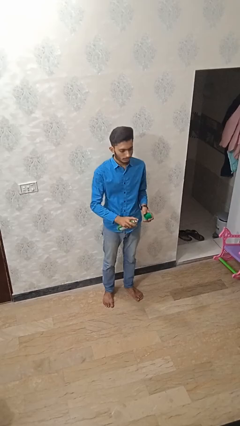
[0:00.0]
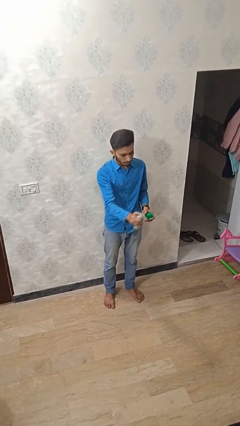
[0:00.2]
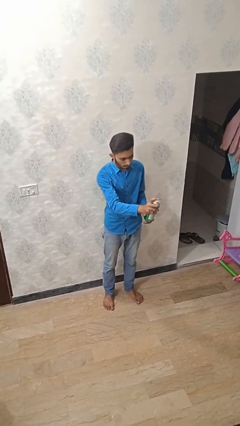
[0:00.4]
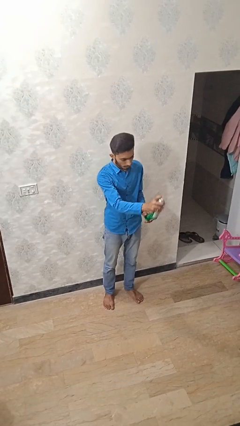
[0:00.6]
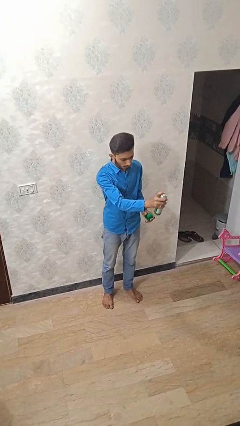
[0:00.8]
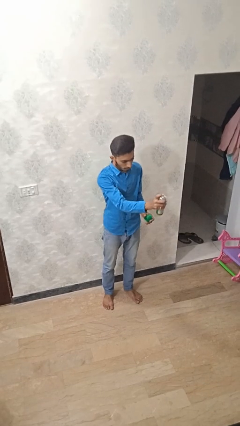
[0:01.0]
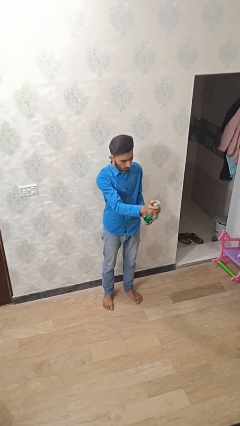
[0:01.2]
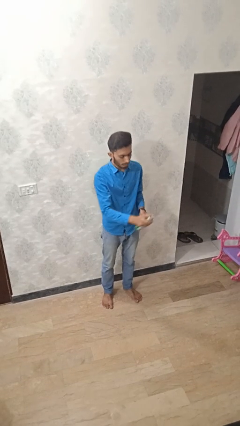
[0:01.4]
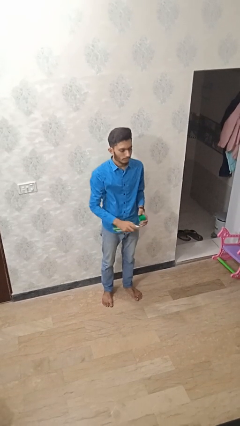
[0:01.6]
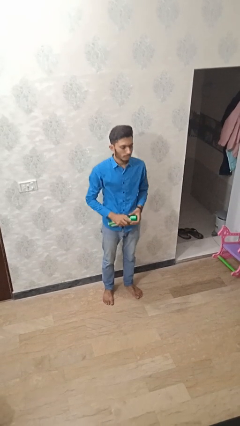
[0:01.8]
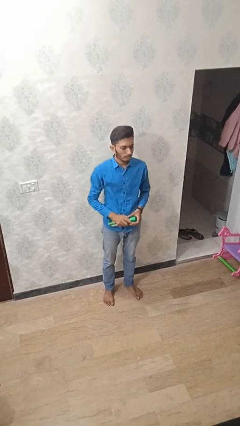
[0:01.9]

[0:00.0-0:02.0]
person sprays from bottle

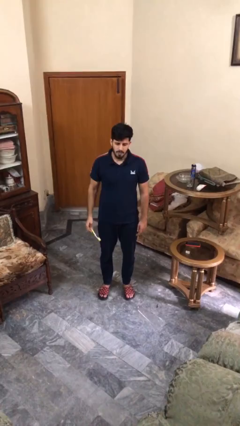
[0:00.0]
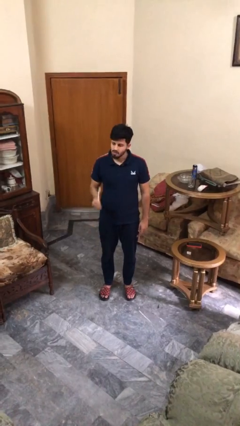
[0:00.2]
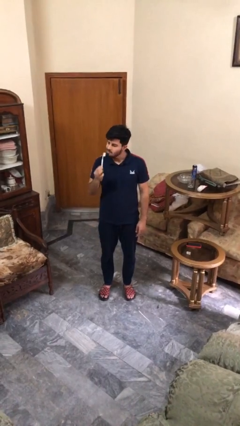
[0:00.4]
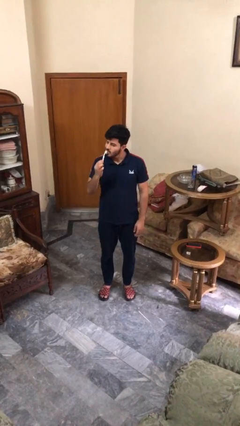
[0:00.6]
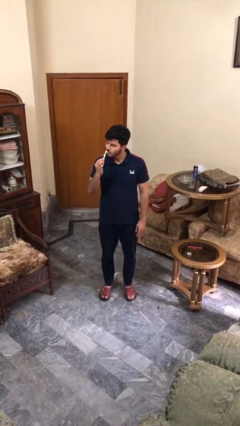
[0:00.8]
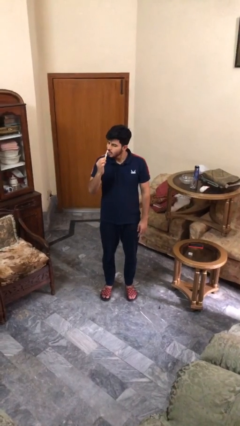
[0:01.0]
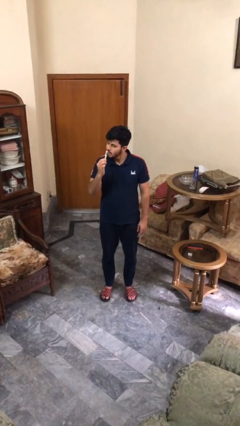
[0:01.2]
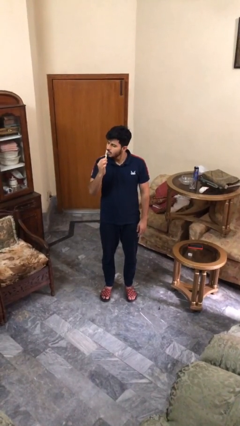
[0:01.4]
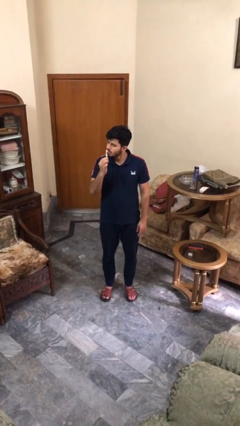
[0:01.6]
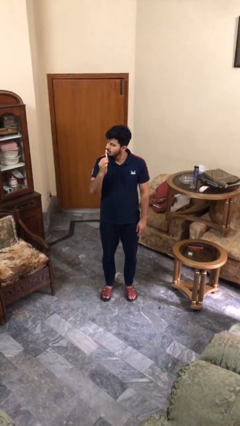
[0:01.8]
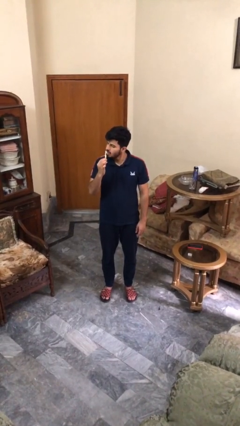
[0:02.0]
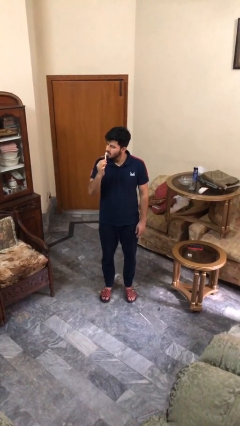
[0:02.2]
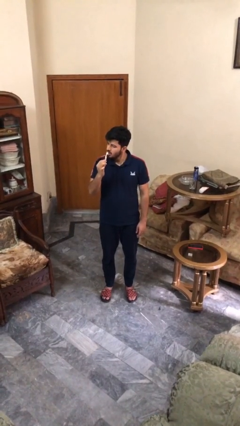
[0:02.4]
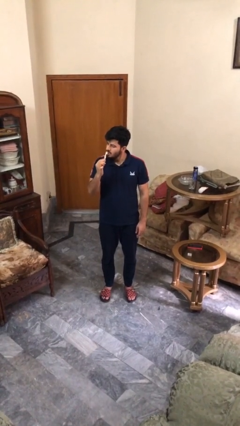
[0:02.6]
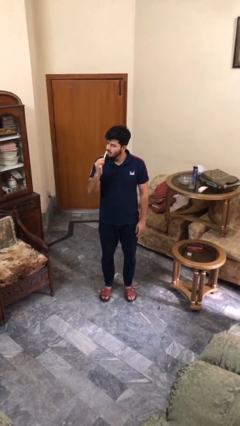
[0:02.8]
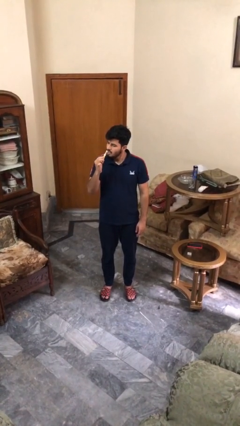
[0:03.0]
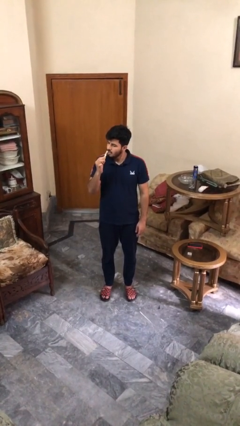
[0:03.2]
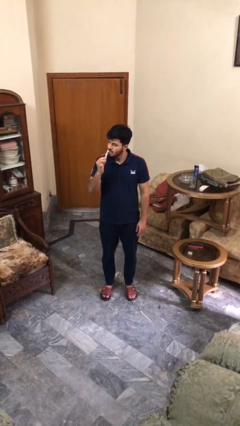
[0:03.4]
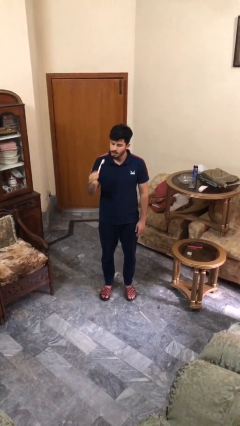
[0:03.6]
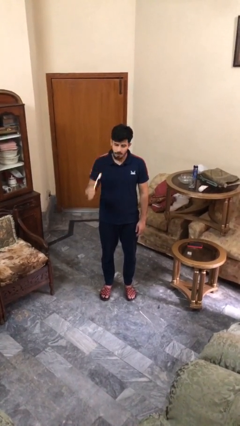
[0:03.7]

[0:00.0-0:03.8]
person brushes teeth

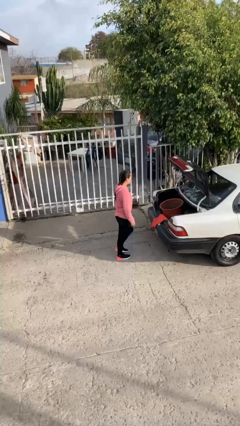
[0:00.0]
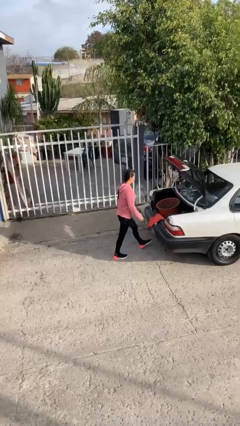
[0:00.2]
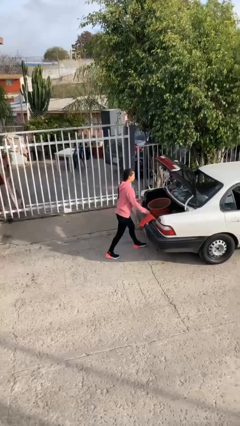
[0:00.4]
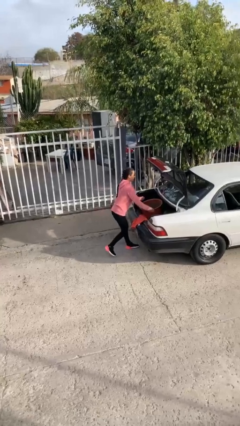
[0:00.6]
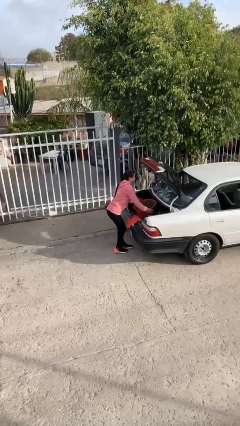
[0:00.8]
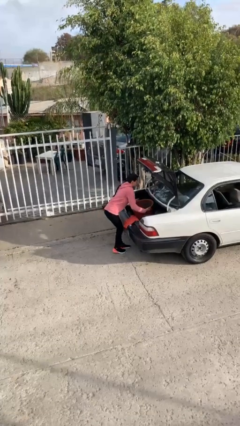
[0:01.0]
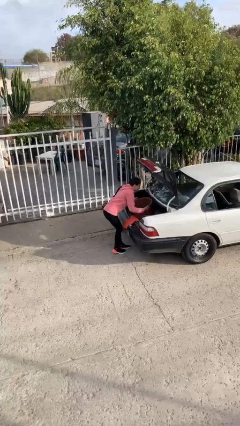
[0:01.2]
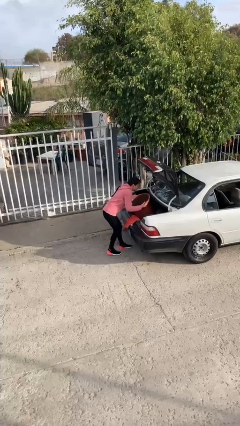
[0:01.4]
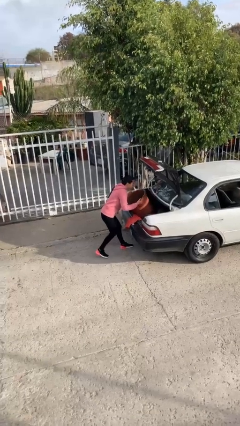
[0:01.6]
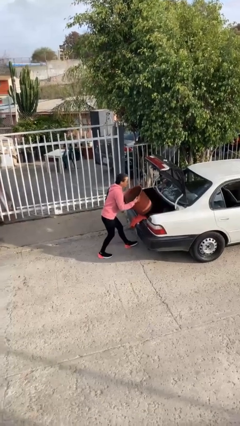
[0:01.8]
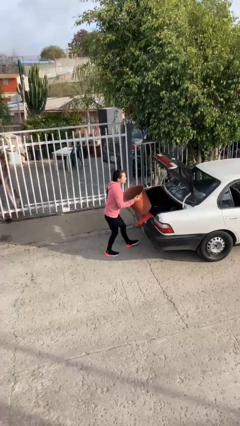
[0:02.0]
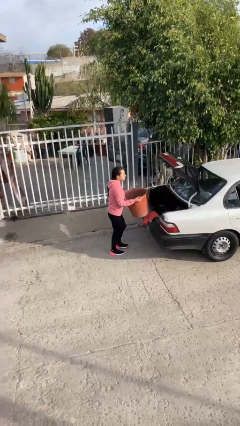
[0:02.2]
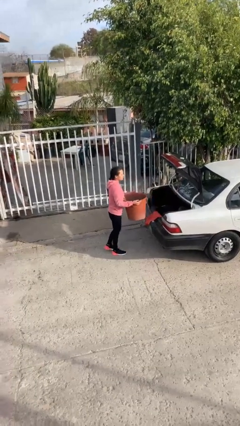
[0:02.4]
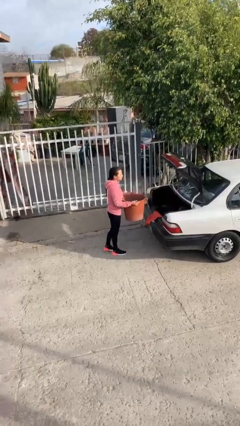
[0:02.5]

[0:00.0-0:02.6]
person unloads car

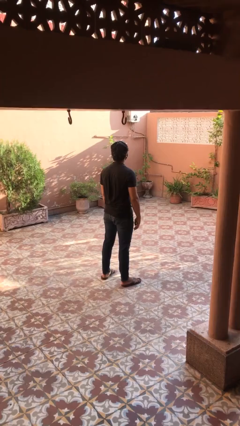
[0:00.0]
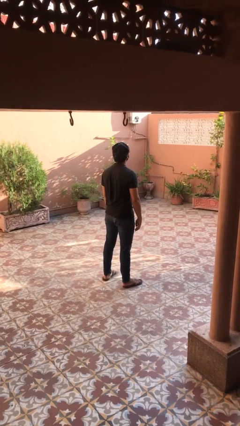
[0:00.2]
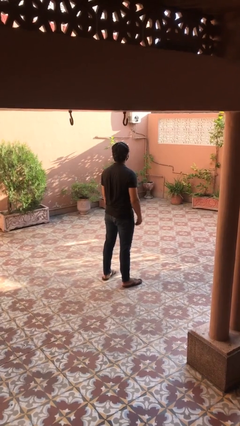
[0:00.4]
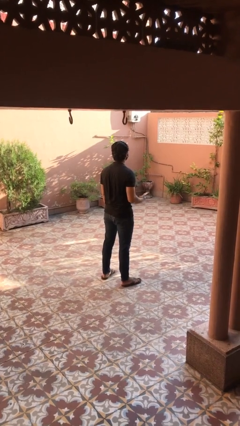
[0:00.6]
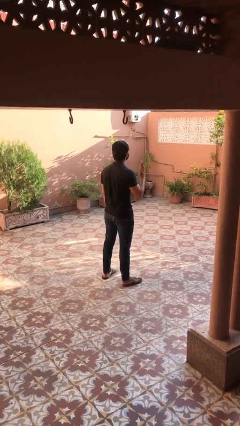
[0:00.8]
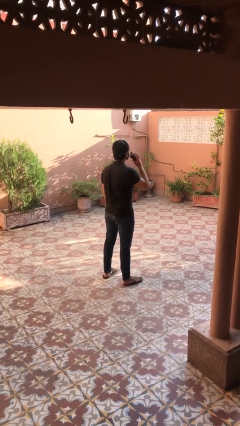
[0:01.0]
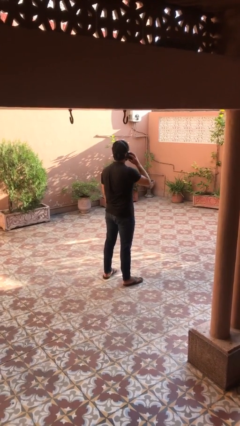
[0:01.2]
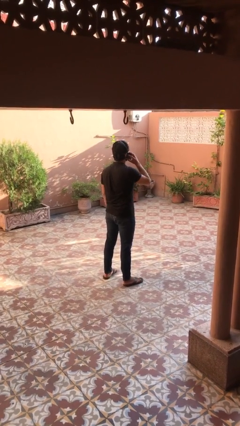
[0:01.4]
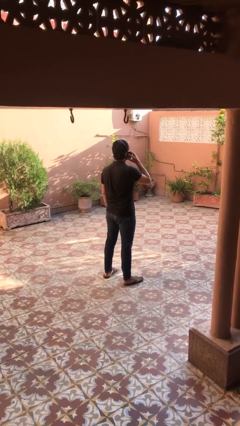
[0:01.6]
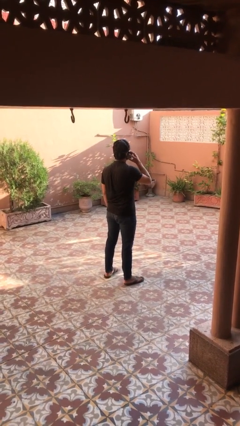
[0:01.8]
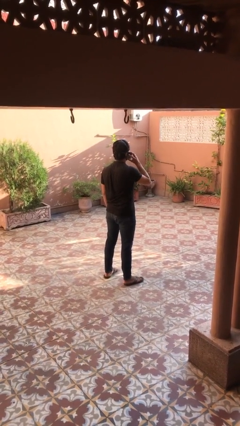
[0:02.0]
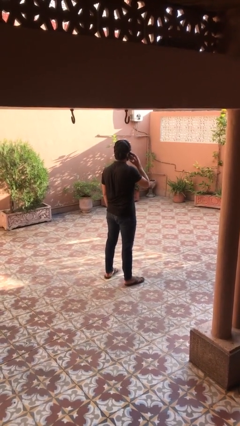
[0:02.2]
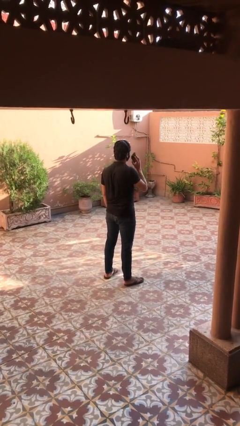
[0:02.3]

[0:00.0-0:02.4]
person gestures call me

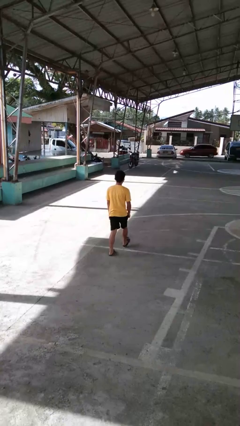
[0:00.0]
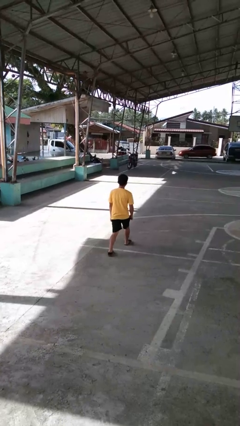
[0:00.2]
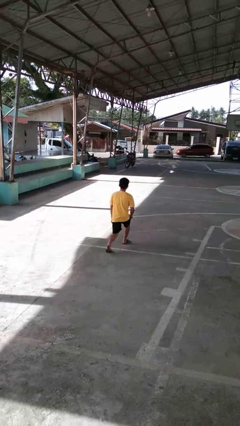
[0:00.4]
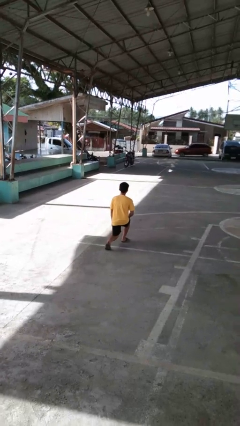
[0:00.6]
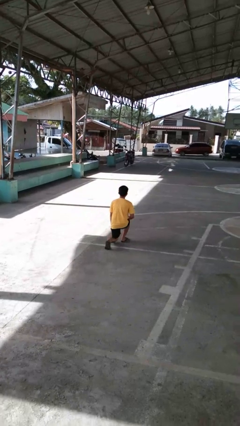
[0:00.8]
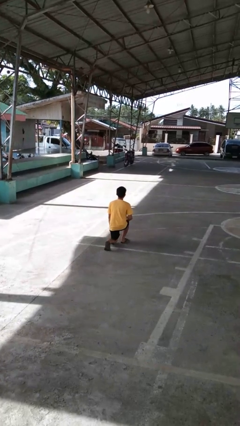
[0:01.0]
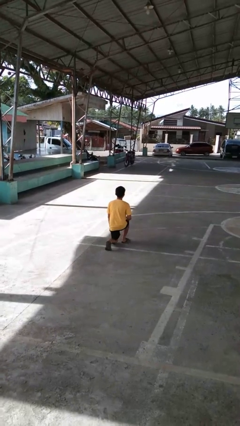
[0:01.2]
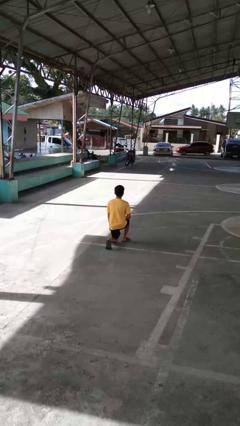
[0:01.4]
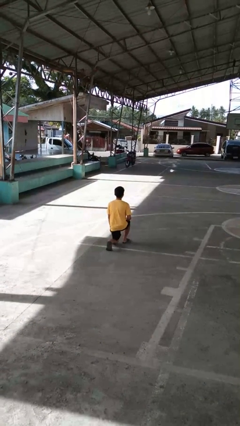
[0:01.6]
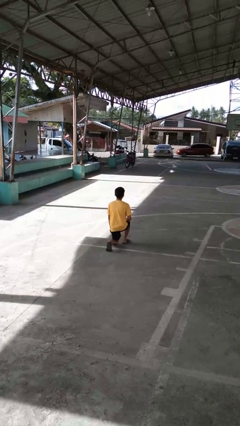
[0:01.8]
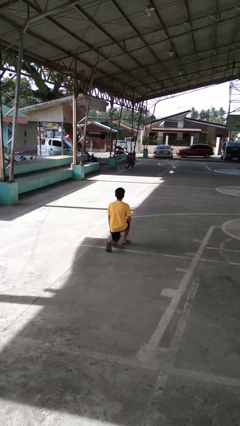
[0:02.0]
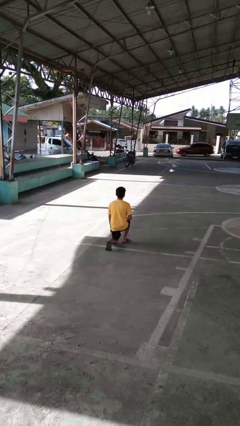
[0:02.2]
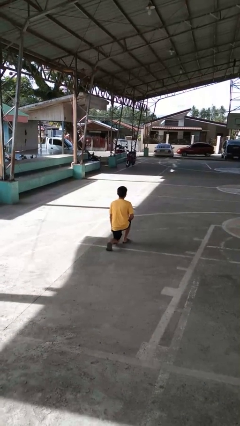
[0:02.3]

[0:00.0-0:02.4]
person kneels

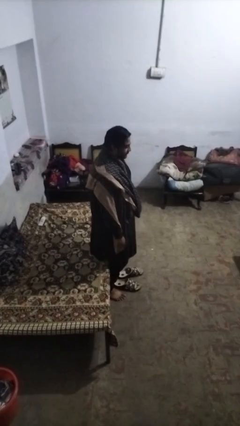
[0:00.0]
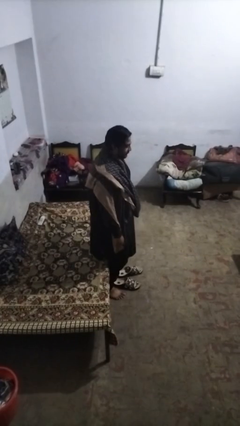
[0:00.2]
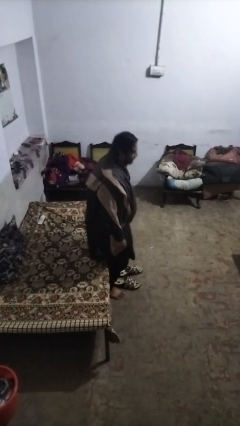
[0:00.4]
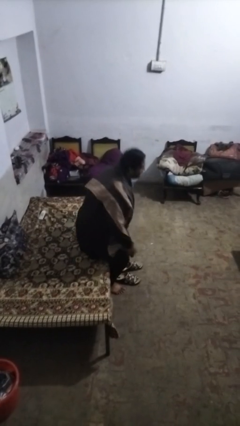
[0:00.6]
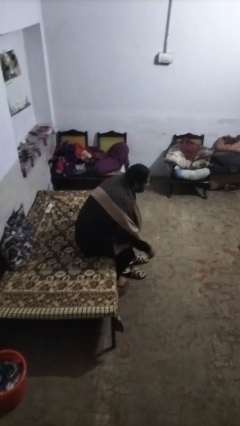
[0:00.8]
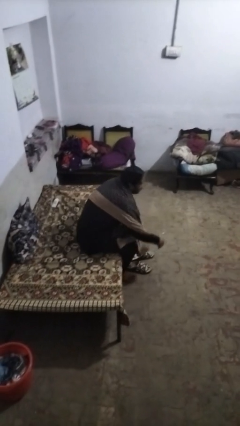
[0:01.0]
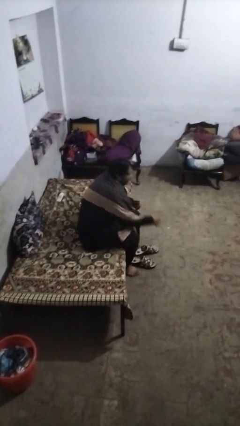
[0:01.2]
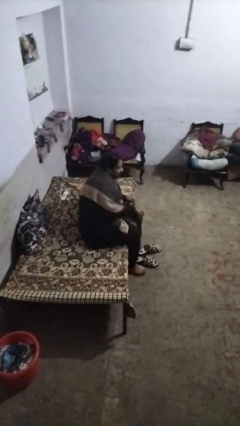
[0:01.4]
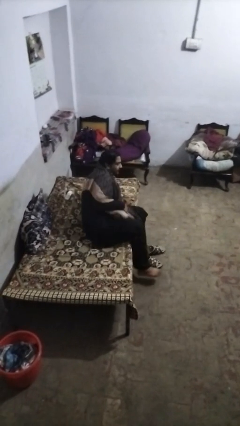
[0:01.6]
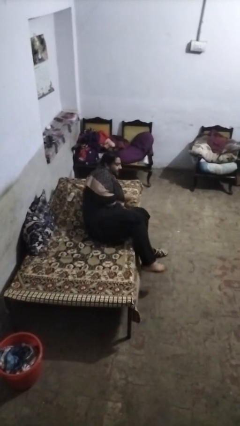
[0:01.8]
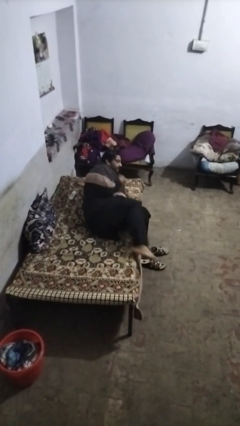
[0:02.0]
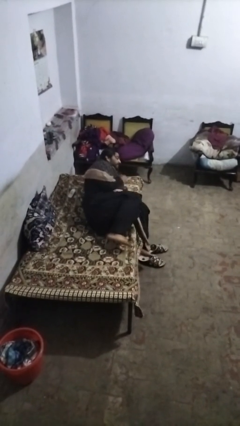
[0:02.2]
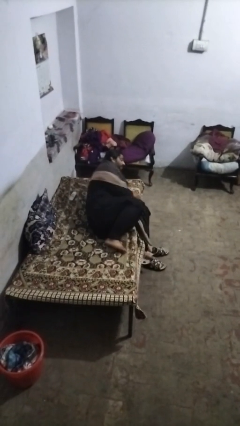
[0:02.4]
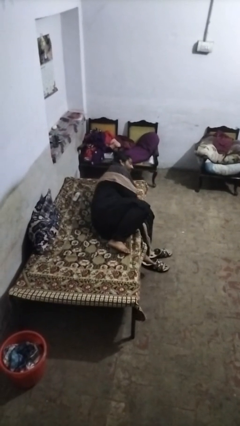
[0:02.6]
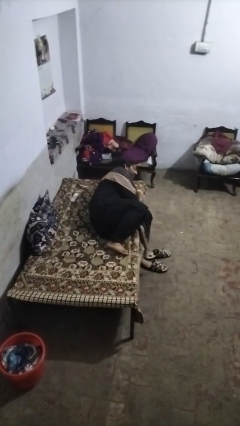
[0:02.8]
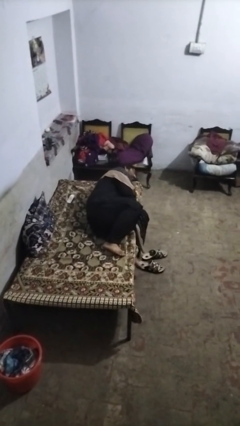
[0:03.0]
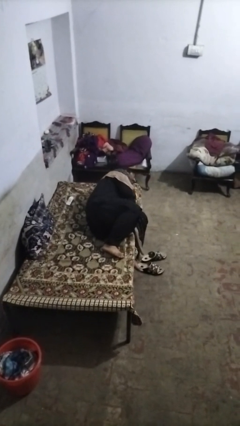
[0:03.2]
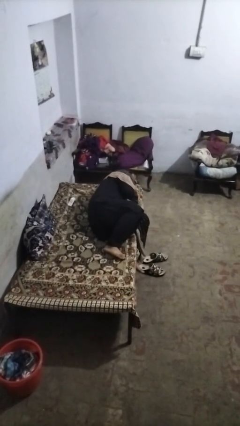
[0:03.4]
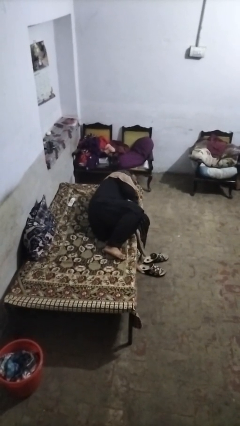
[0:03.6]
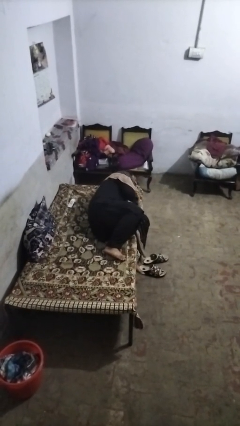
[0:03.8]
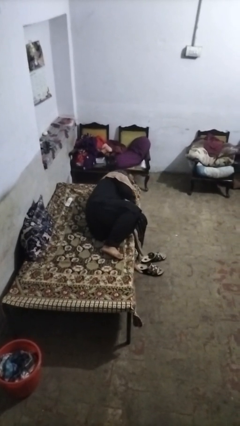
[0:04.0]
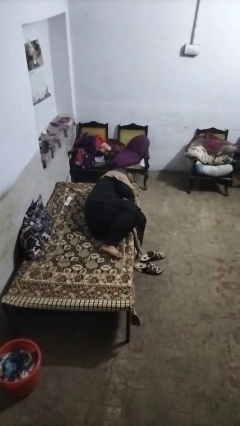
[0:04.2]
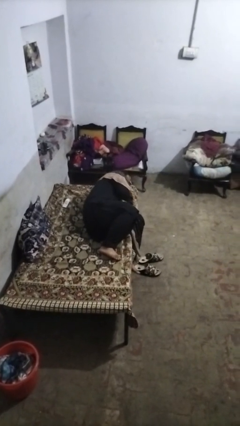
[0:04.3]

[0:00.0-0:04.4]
person lies down on bed
